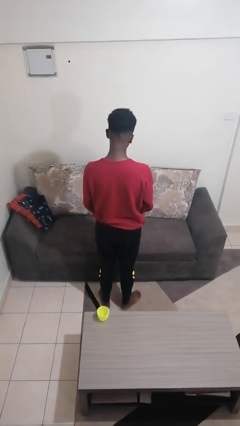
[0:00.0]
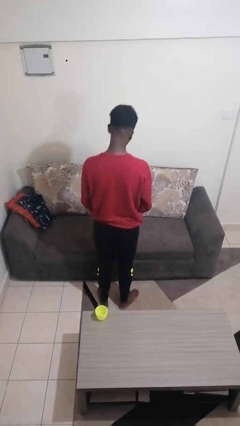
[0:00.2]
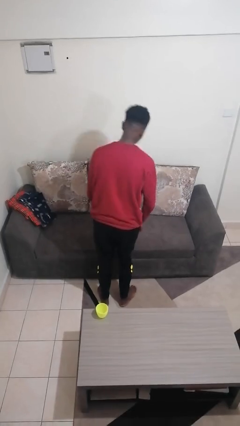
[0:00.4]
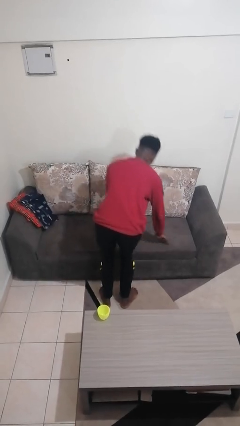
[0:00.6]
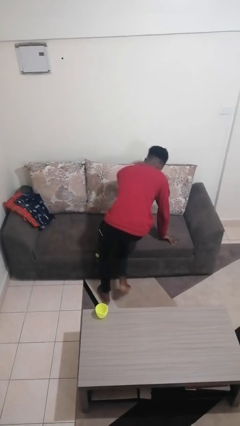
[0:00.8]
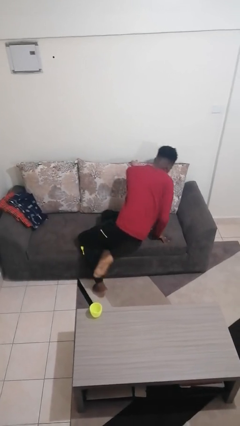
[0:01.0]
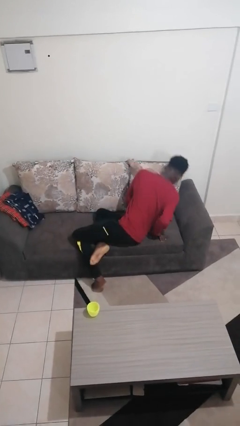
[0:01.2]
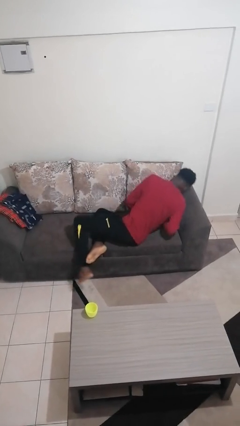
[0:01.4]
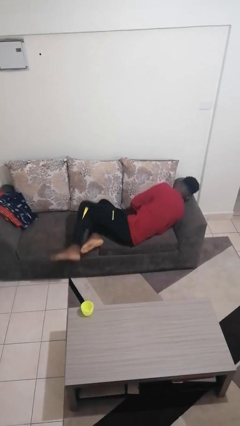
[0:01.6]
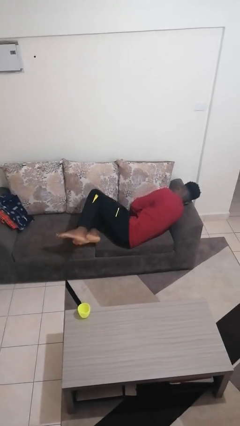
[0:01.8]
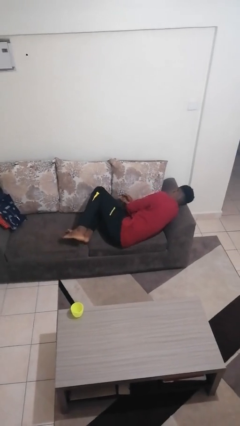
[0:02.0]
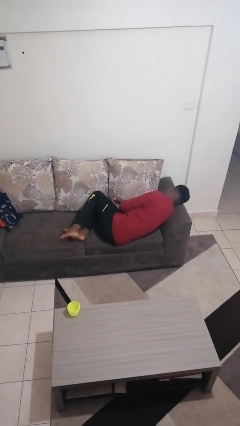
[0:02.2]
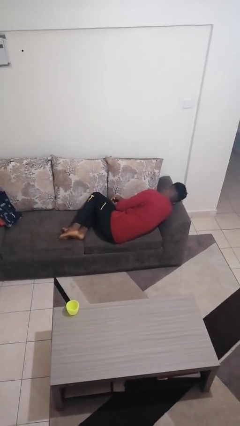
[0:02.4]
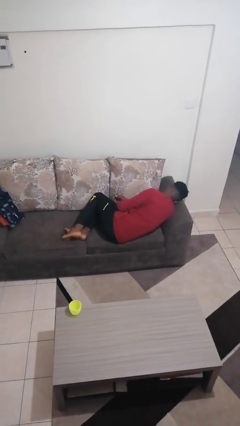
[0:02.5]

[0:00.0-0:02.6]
person lies down on couch

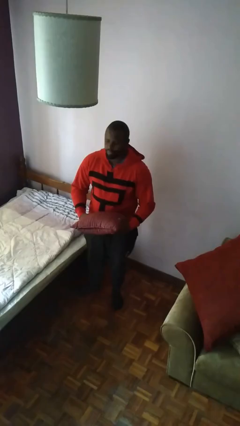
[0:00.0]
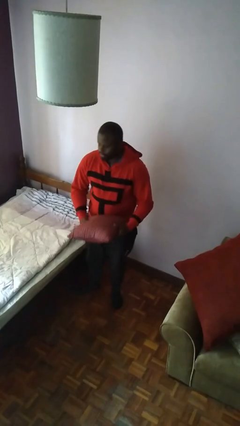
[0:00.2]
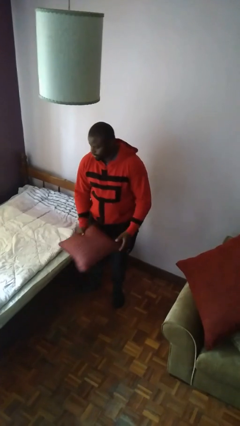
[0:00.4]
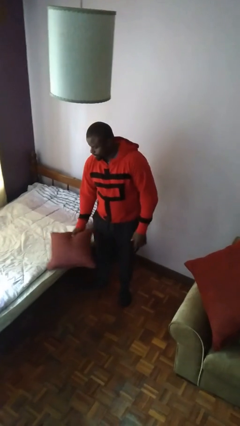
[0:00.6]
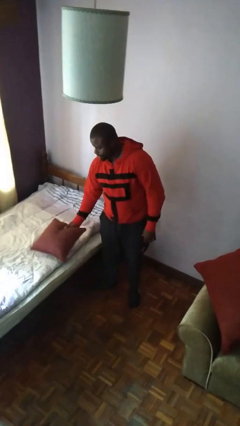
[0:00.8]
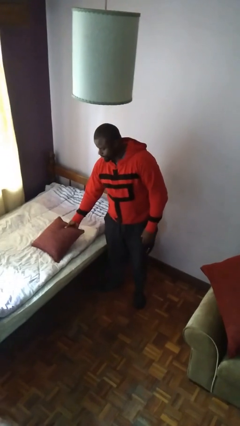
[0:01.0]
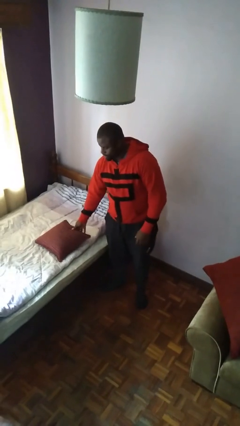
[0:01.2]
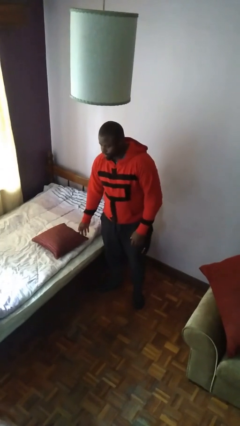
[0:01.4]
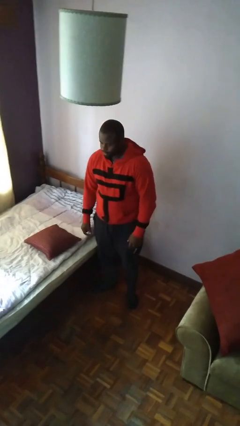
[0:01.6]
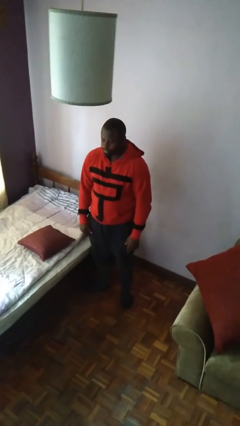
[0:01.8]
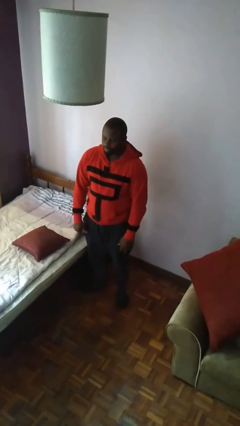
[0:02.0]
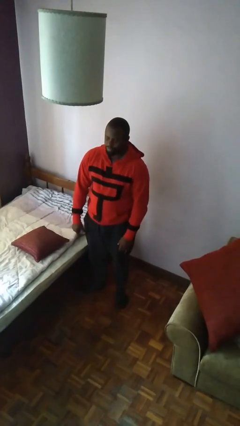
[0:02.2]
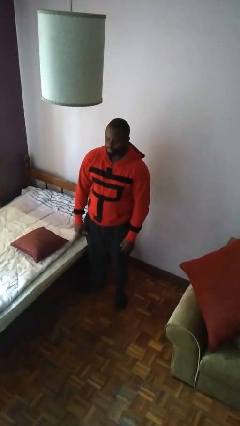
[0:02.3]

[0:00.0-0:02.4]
person puts down object on bed

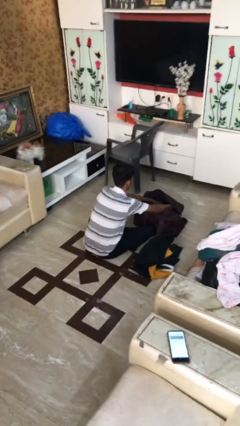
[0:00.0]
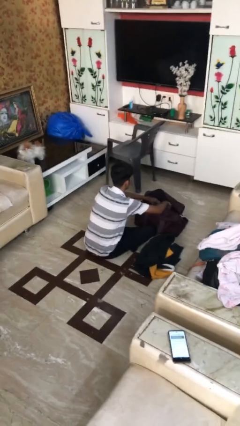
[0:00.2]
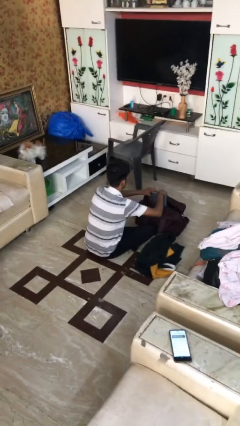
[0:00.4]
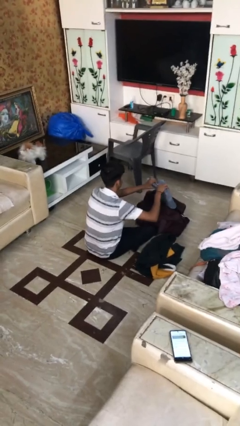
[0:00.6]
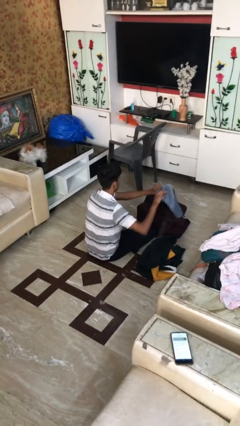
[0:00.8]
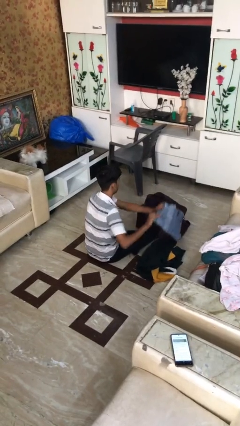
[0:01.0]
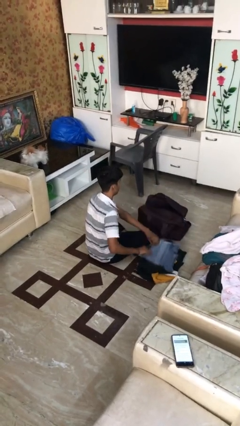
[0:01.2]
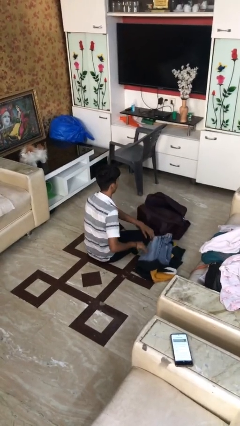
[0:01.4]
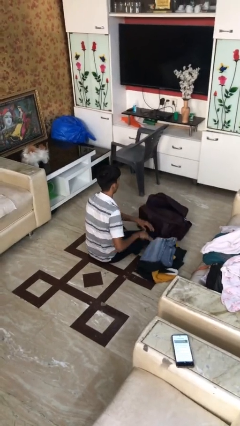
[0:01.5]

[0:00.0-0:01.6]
person unloads clothes from suitcase

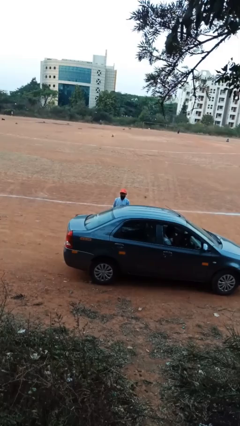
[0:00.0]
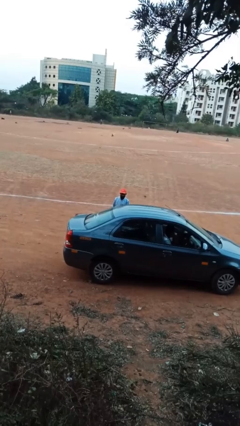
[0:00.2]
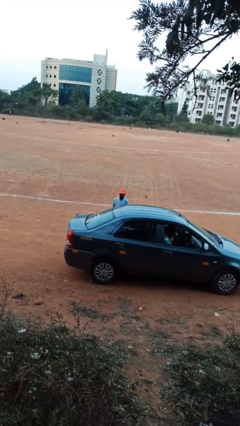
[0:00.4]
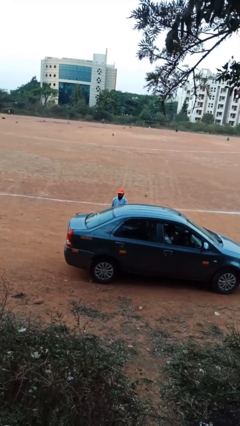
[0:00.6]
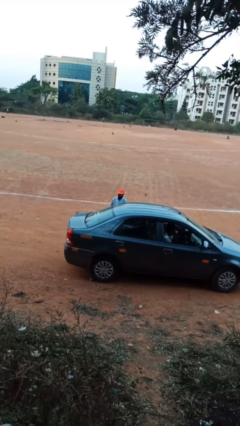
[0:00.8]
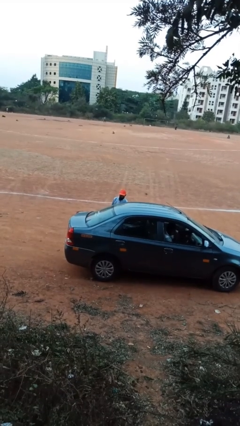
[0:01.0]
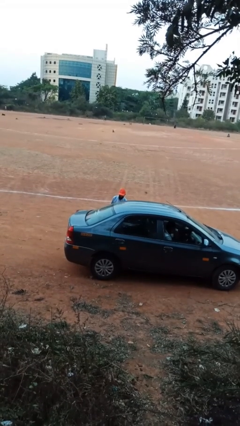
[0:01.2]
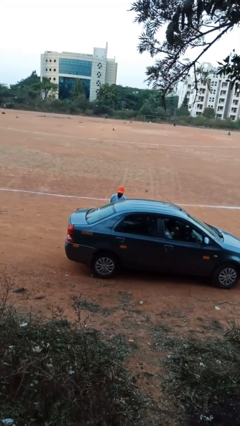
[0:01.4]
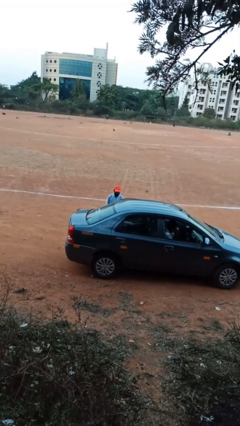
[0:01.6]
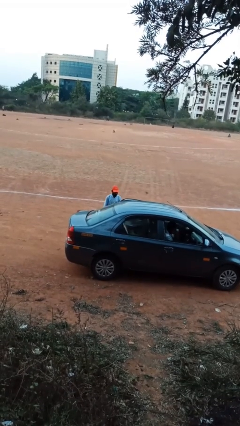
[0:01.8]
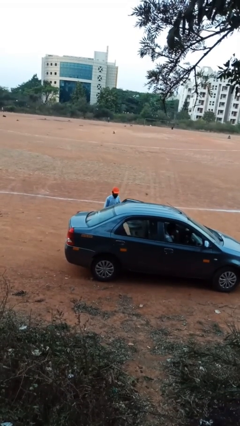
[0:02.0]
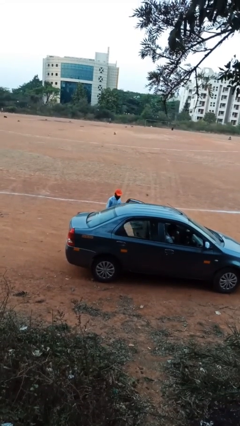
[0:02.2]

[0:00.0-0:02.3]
person enters car

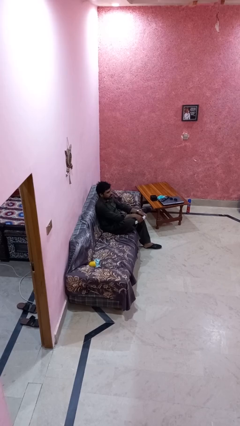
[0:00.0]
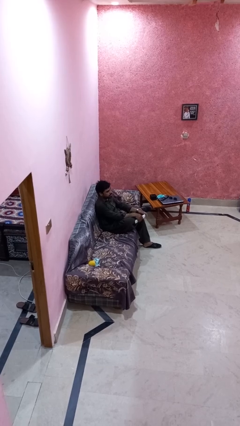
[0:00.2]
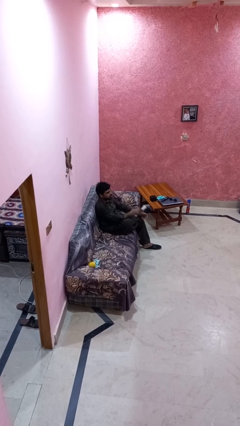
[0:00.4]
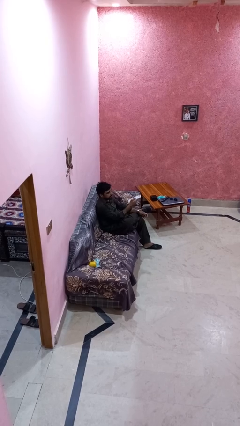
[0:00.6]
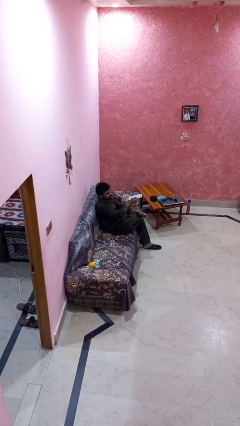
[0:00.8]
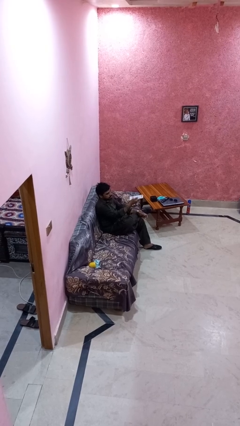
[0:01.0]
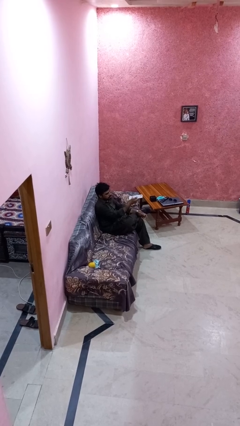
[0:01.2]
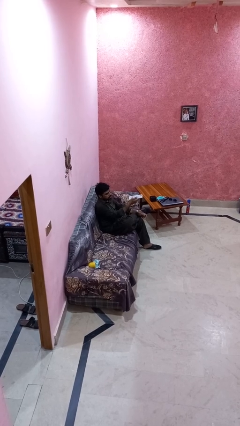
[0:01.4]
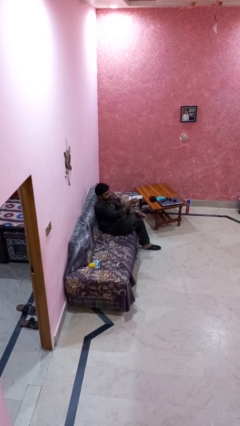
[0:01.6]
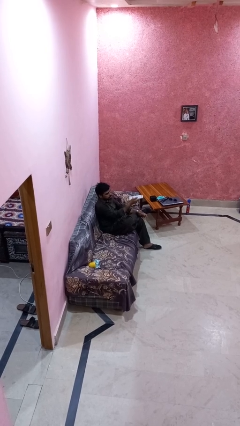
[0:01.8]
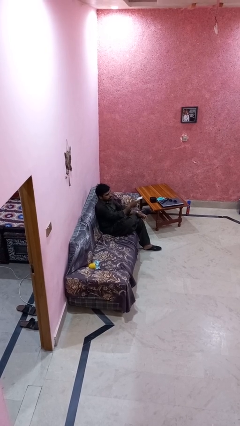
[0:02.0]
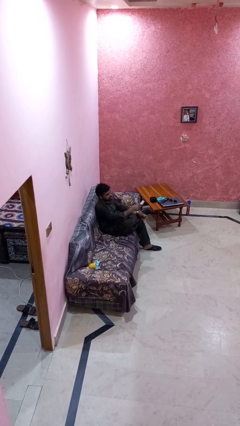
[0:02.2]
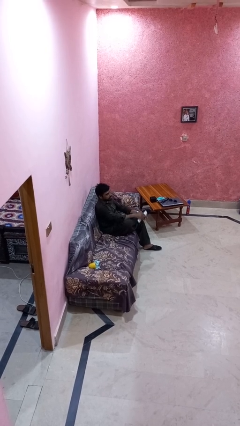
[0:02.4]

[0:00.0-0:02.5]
person uses television remote

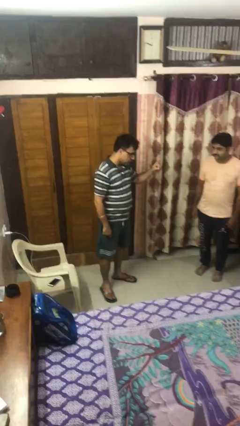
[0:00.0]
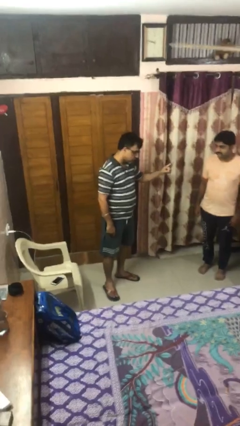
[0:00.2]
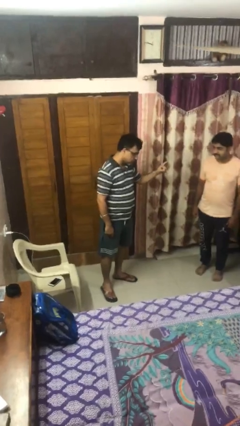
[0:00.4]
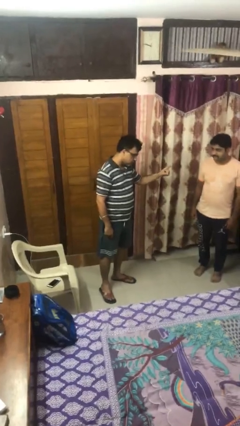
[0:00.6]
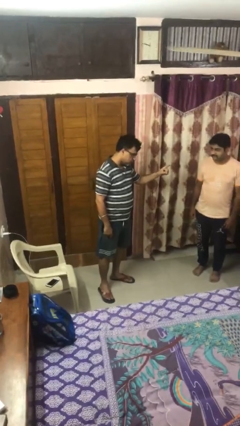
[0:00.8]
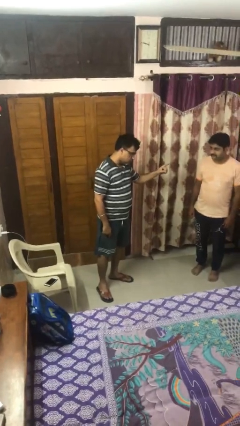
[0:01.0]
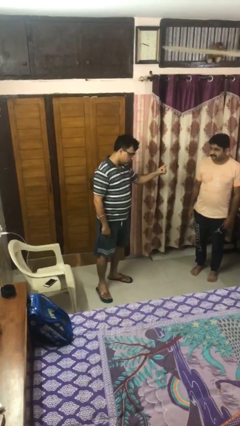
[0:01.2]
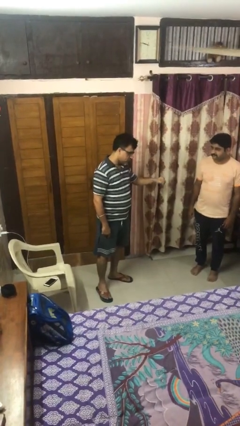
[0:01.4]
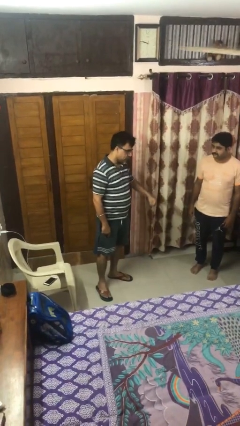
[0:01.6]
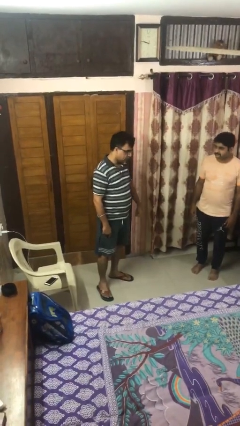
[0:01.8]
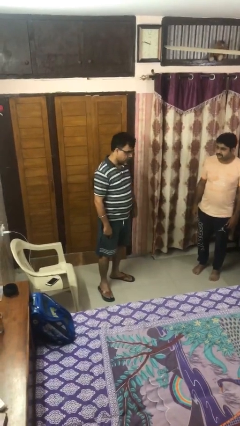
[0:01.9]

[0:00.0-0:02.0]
person points at person

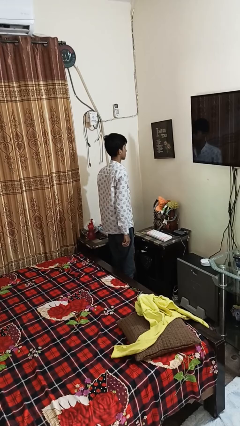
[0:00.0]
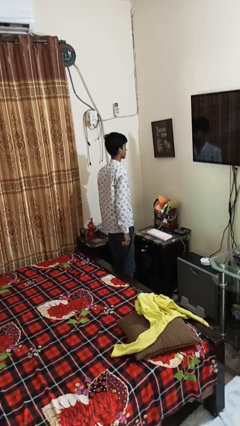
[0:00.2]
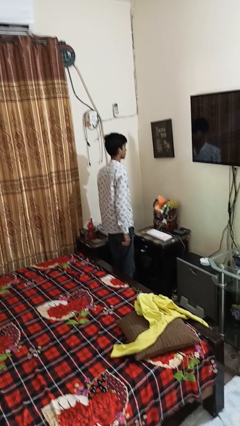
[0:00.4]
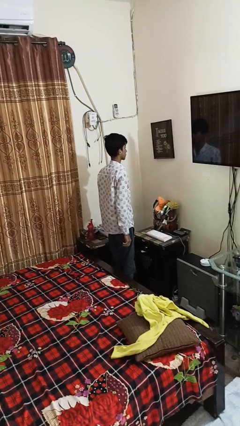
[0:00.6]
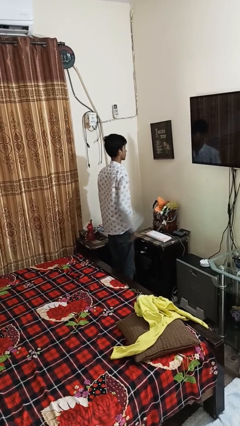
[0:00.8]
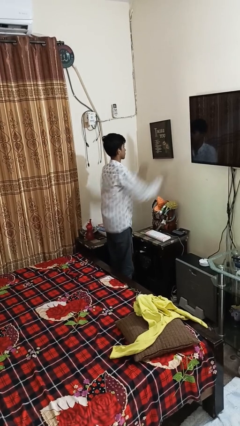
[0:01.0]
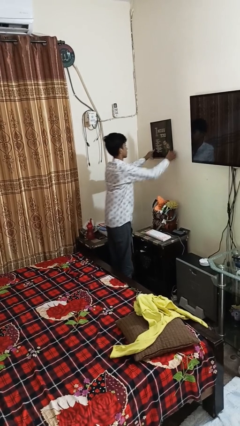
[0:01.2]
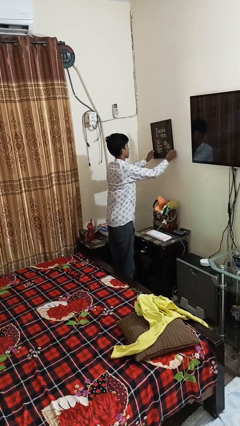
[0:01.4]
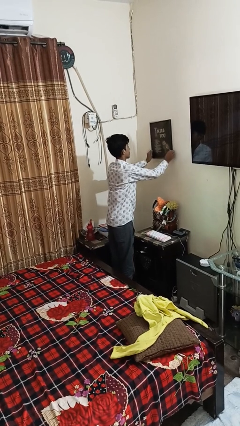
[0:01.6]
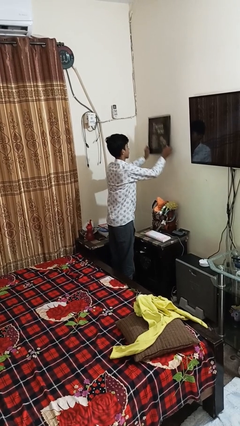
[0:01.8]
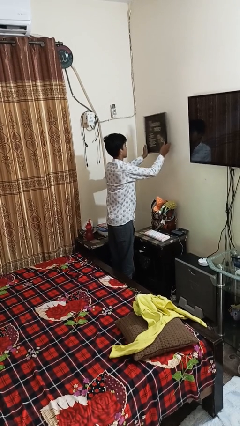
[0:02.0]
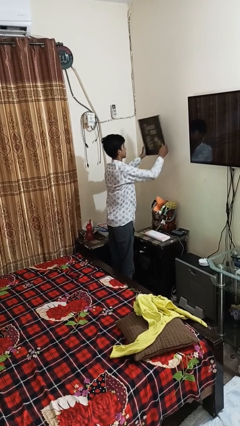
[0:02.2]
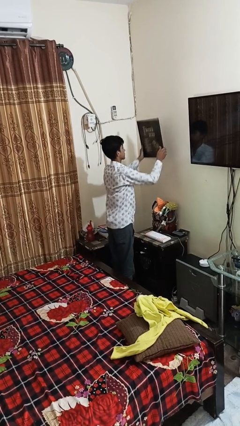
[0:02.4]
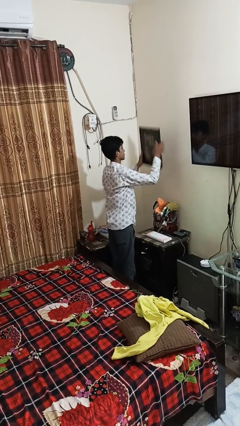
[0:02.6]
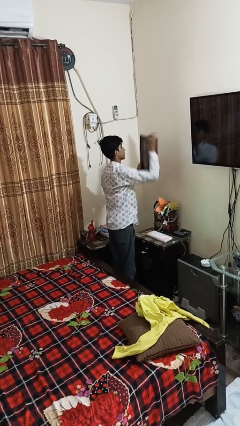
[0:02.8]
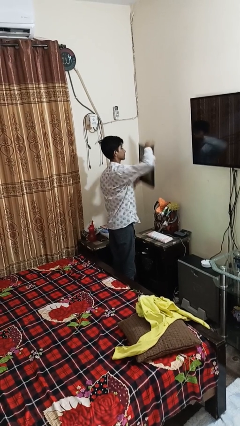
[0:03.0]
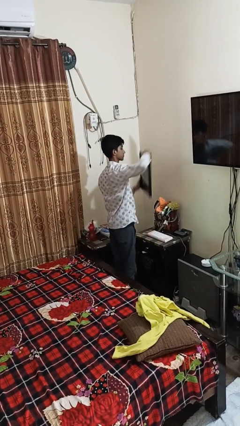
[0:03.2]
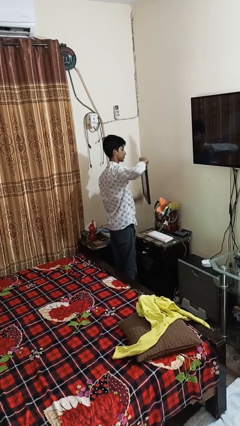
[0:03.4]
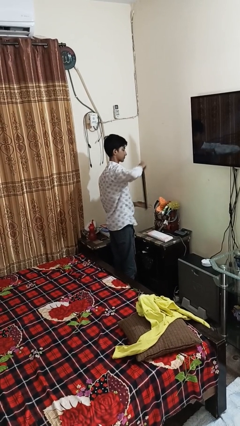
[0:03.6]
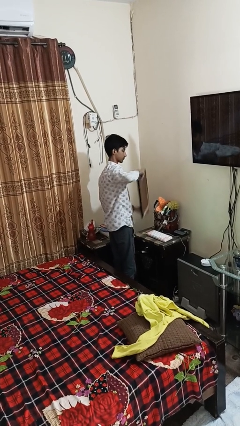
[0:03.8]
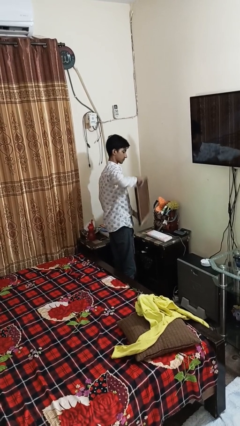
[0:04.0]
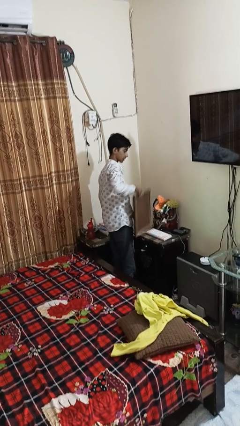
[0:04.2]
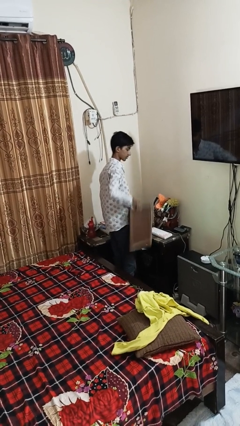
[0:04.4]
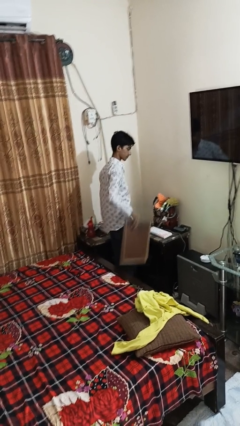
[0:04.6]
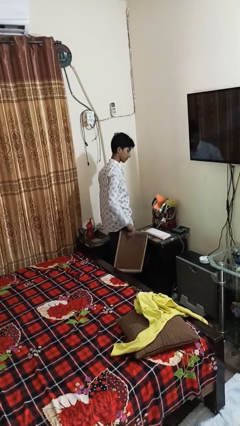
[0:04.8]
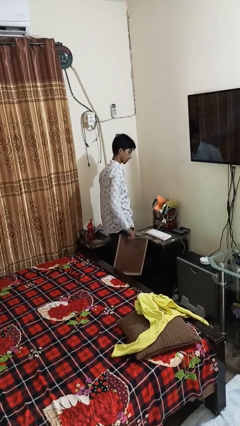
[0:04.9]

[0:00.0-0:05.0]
person takes down picture frame
